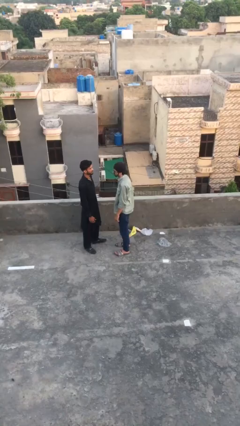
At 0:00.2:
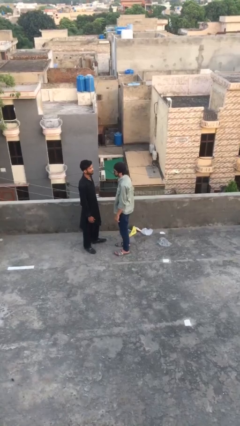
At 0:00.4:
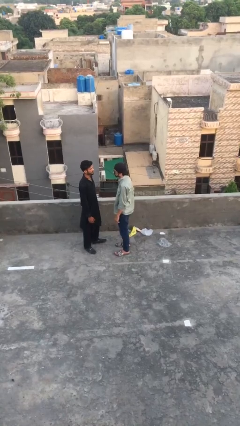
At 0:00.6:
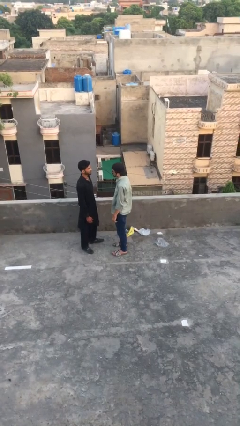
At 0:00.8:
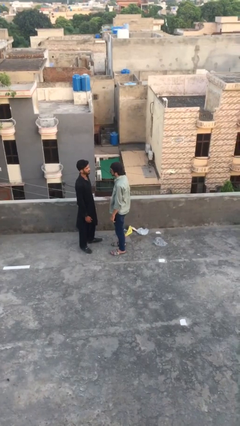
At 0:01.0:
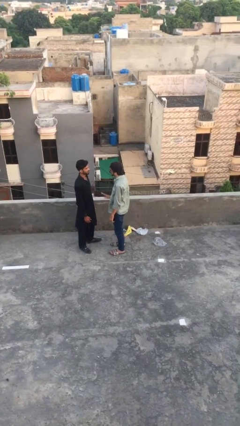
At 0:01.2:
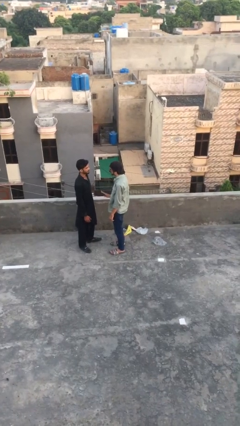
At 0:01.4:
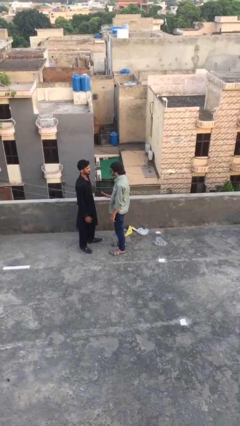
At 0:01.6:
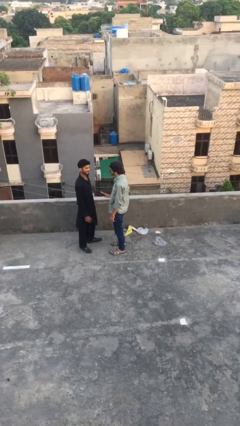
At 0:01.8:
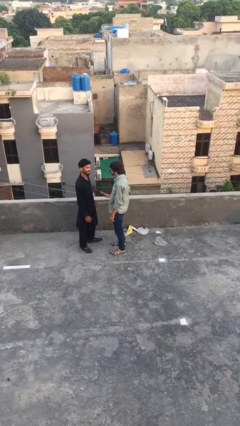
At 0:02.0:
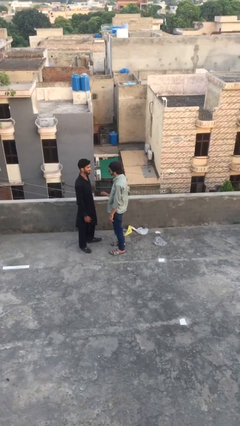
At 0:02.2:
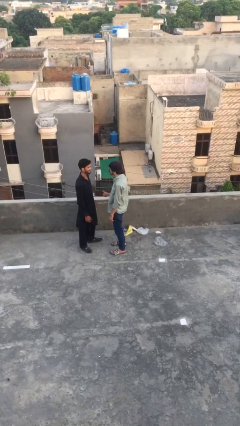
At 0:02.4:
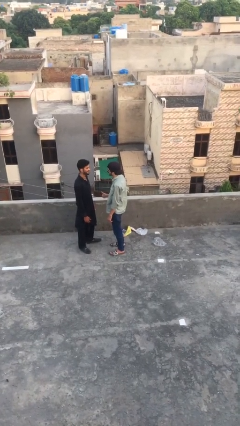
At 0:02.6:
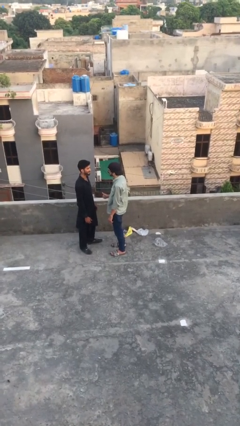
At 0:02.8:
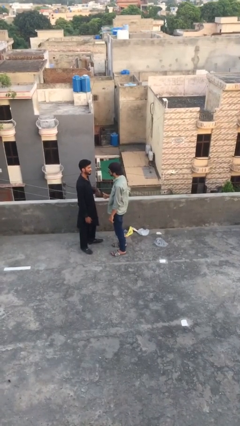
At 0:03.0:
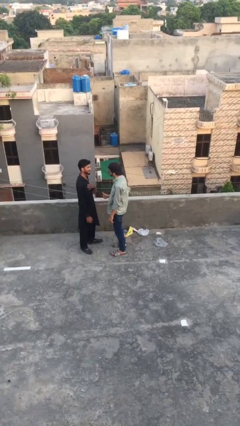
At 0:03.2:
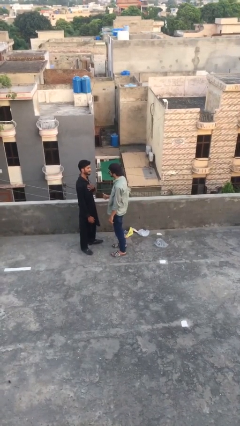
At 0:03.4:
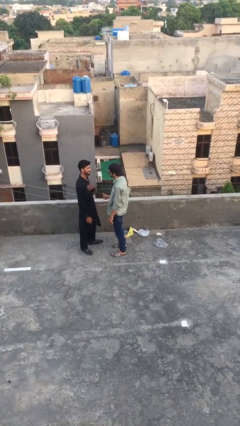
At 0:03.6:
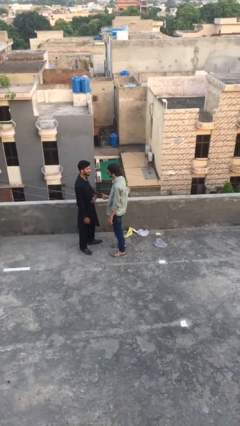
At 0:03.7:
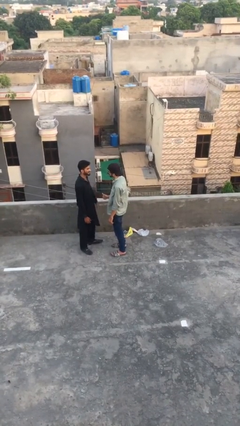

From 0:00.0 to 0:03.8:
person talks to person

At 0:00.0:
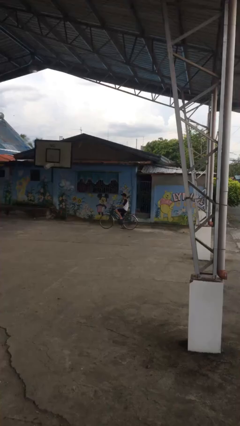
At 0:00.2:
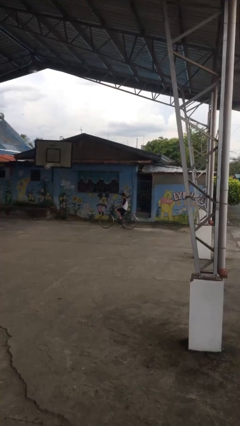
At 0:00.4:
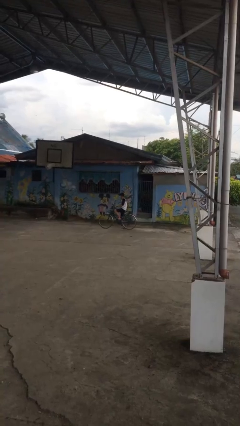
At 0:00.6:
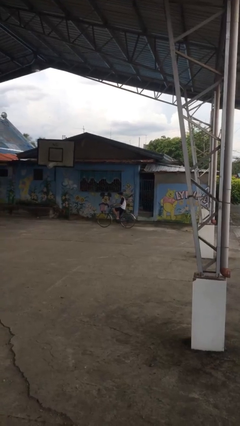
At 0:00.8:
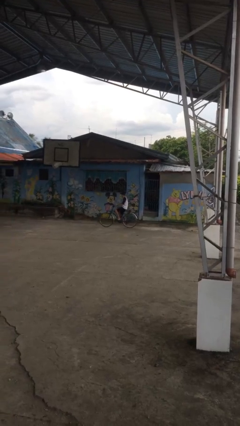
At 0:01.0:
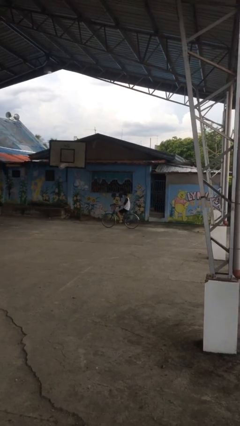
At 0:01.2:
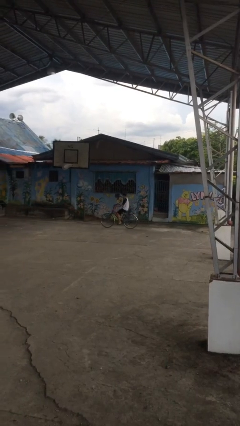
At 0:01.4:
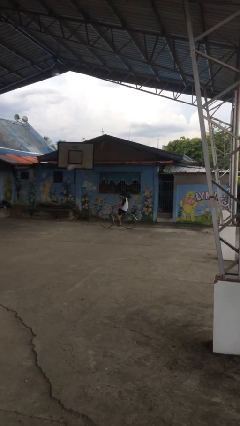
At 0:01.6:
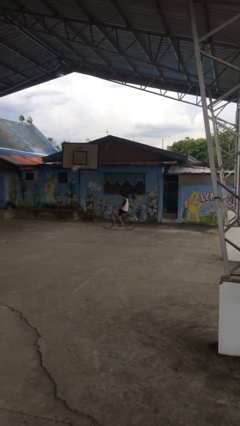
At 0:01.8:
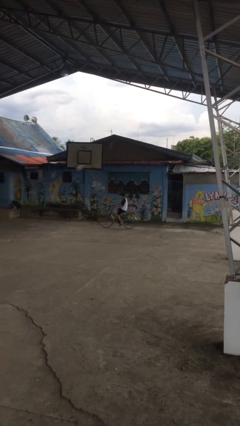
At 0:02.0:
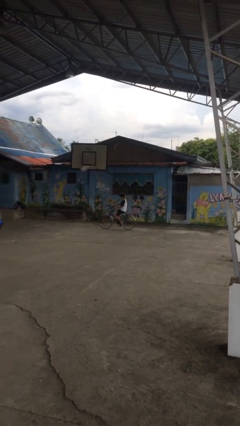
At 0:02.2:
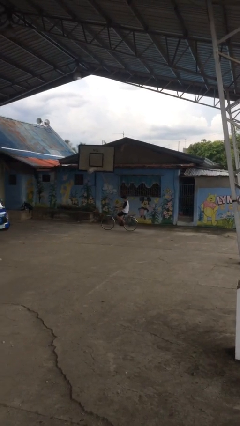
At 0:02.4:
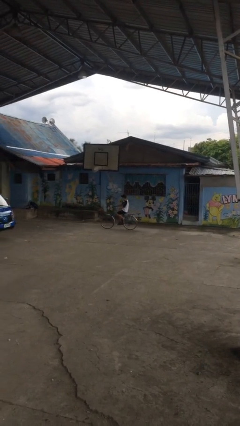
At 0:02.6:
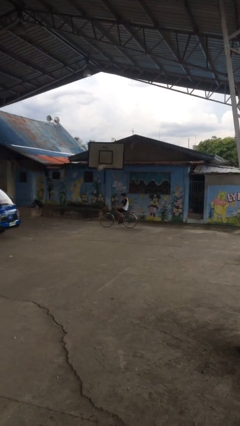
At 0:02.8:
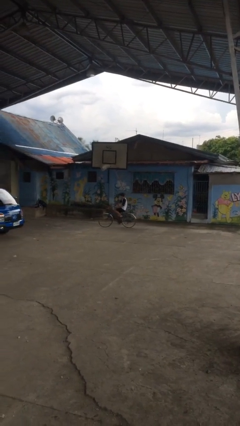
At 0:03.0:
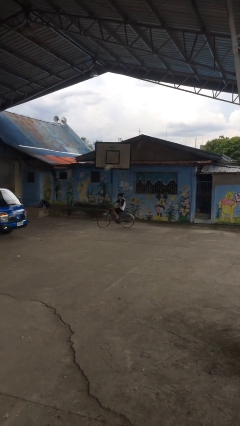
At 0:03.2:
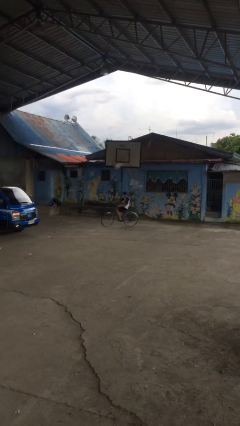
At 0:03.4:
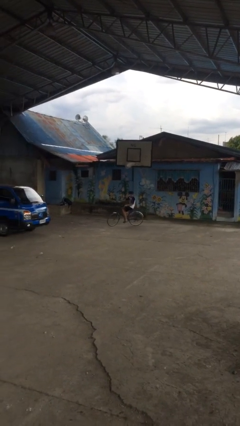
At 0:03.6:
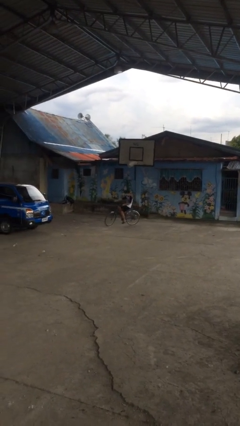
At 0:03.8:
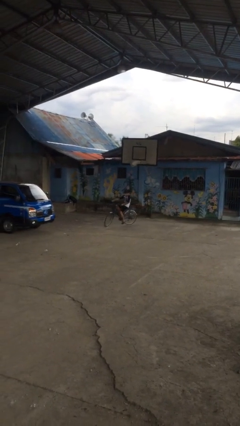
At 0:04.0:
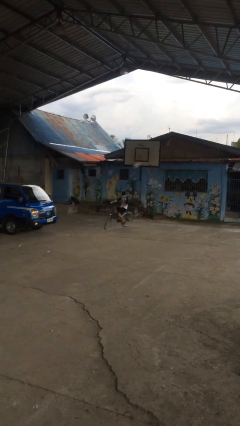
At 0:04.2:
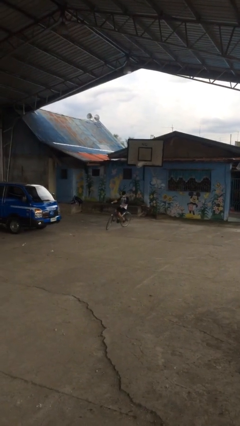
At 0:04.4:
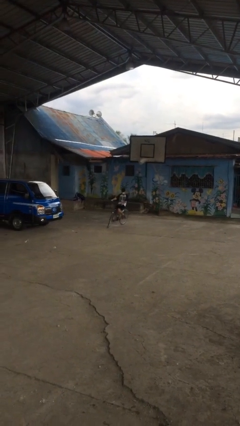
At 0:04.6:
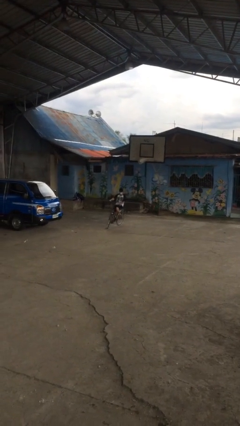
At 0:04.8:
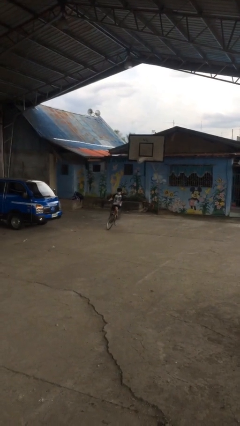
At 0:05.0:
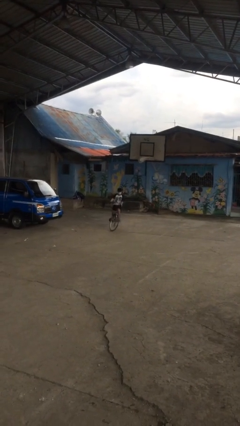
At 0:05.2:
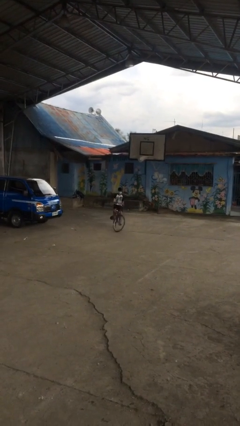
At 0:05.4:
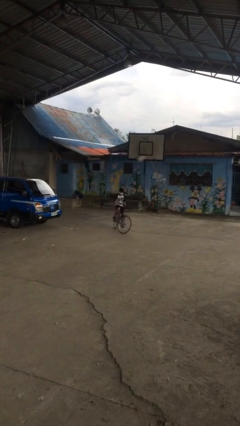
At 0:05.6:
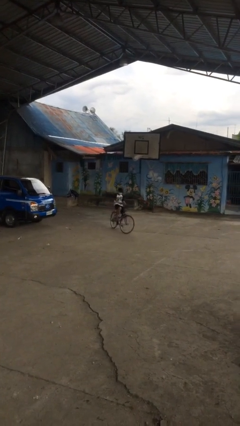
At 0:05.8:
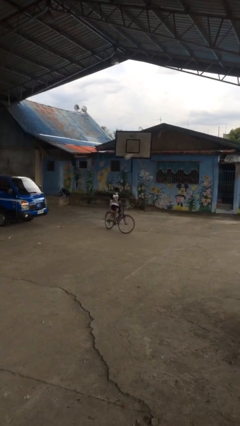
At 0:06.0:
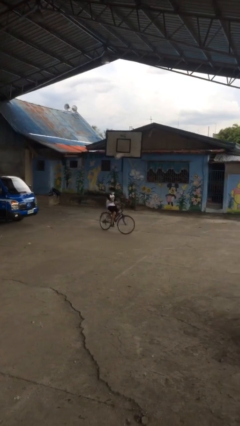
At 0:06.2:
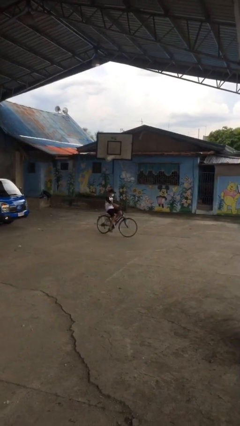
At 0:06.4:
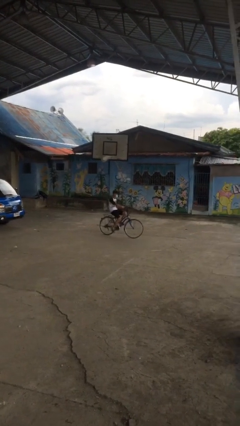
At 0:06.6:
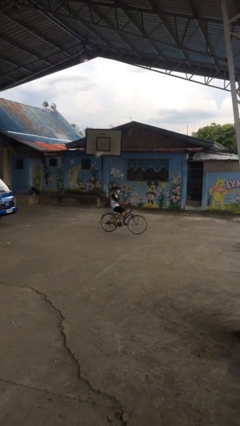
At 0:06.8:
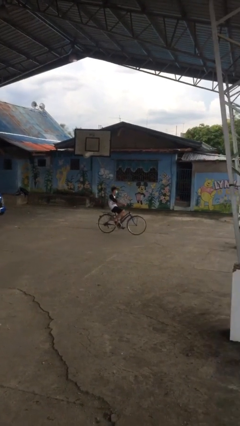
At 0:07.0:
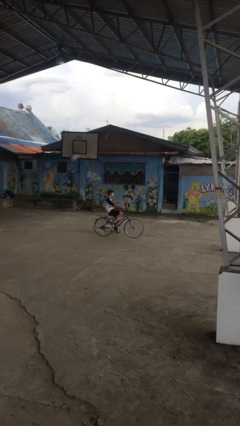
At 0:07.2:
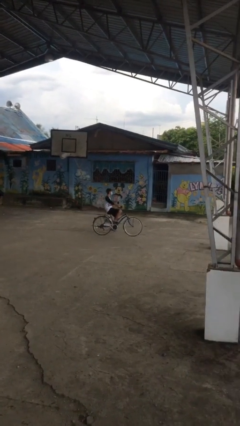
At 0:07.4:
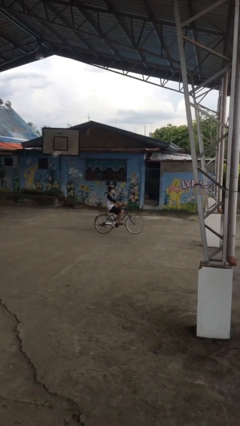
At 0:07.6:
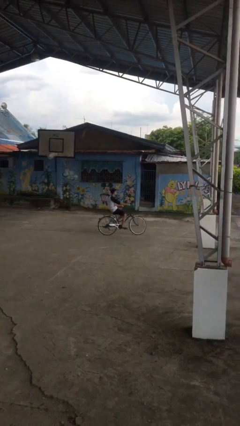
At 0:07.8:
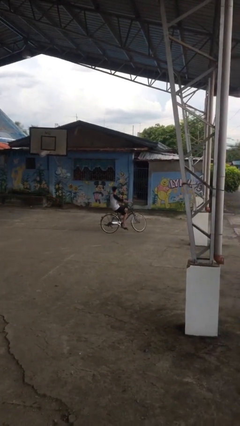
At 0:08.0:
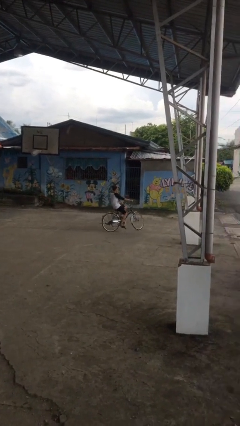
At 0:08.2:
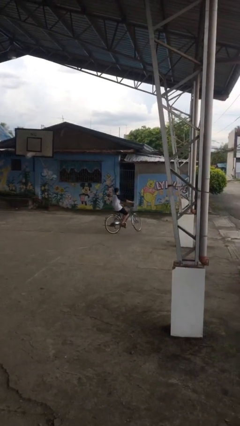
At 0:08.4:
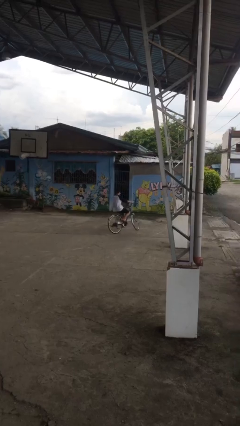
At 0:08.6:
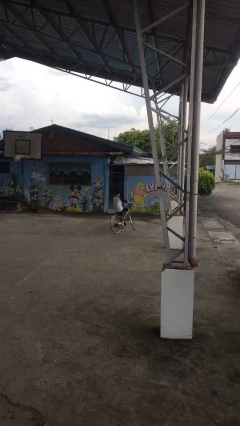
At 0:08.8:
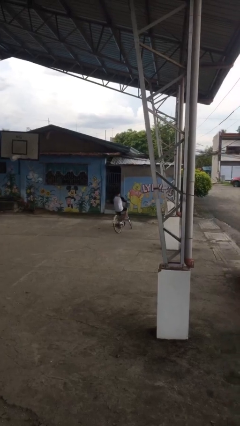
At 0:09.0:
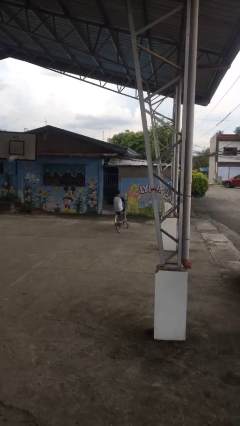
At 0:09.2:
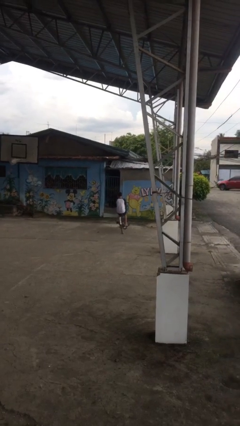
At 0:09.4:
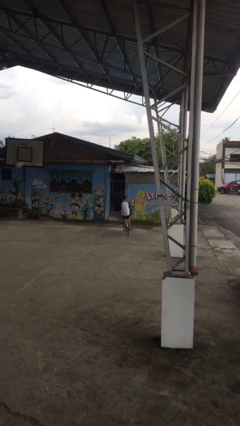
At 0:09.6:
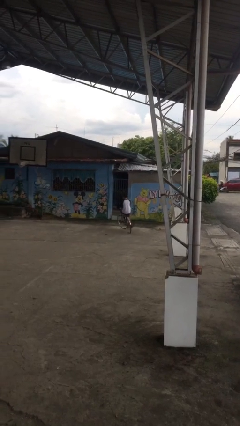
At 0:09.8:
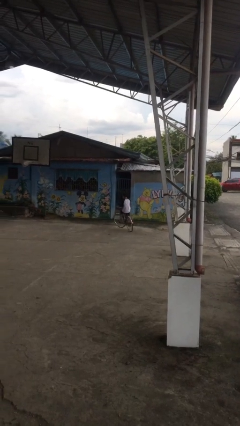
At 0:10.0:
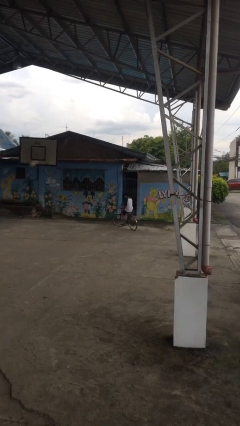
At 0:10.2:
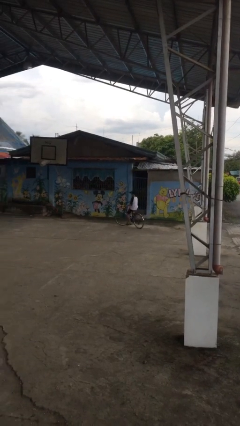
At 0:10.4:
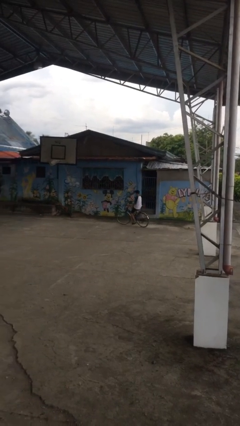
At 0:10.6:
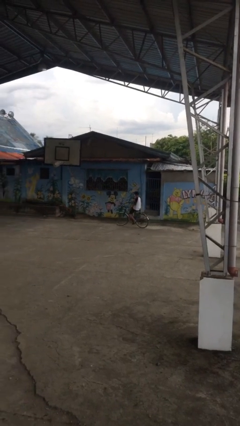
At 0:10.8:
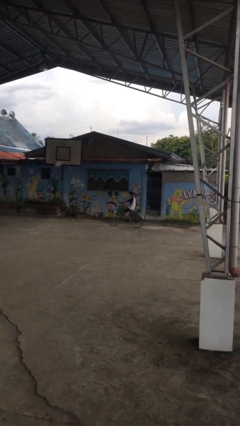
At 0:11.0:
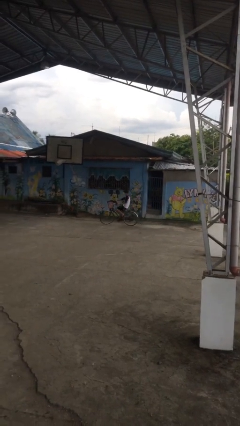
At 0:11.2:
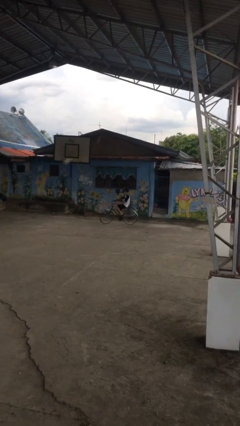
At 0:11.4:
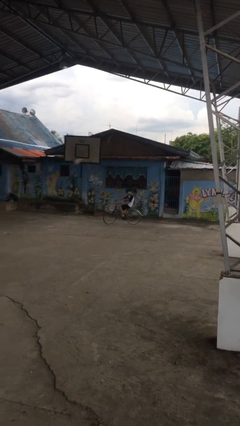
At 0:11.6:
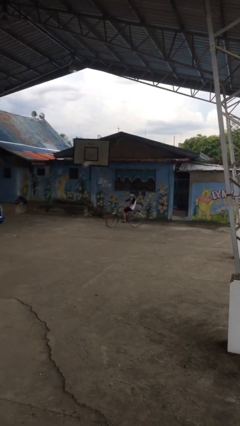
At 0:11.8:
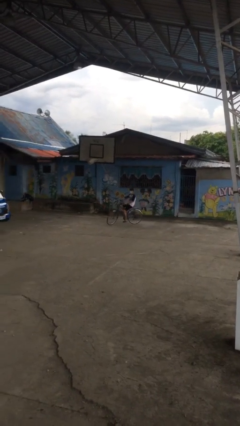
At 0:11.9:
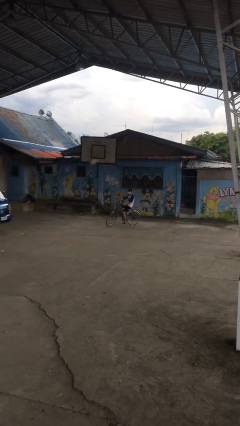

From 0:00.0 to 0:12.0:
person rides bicycle

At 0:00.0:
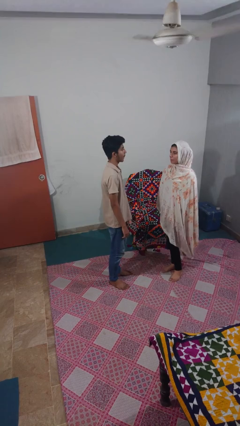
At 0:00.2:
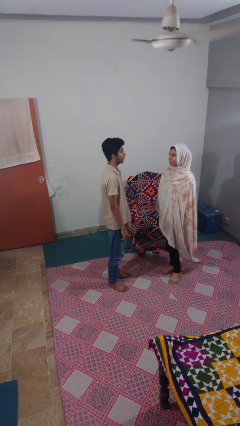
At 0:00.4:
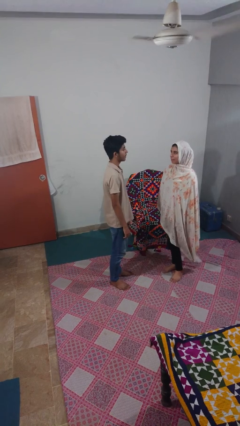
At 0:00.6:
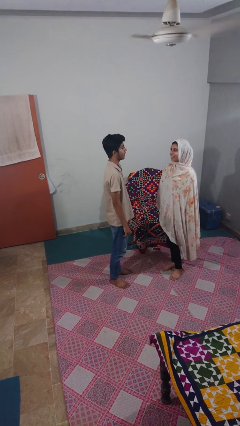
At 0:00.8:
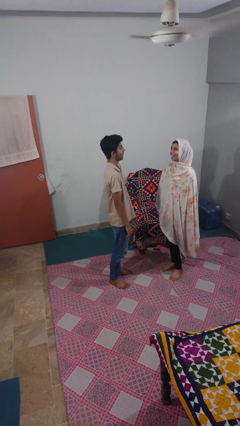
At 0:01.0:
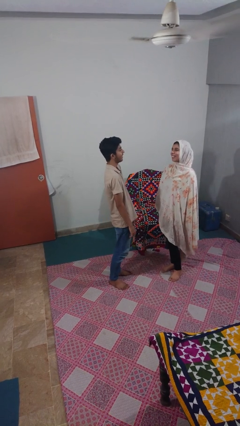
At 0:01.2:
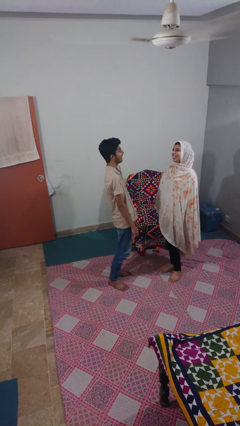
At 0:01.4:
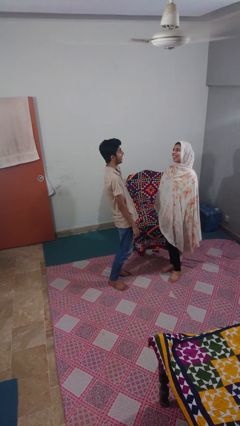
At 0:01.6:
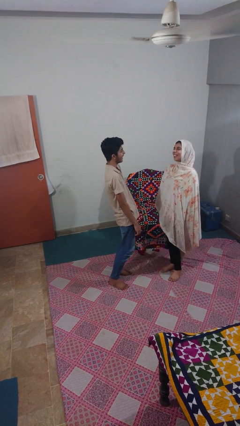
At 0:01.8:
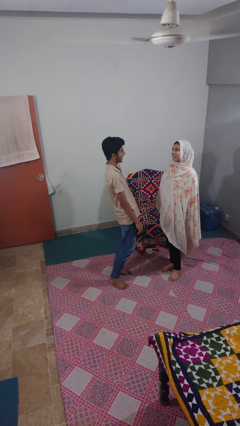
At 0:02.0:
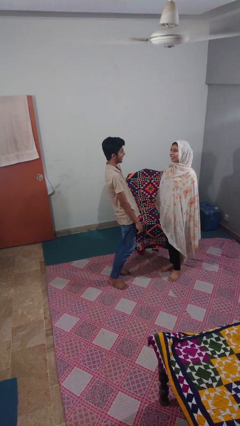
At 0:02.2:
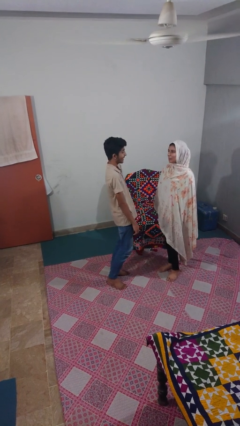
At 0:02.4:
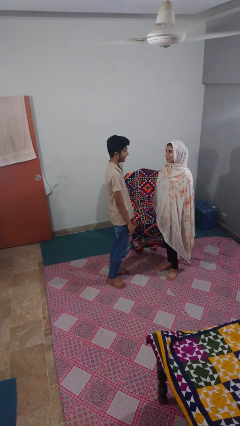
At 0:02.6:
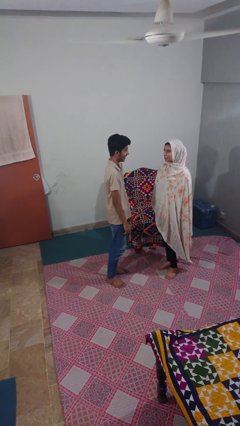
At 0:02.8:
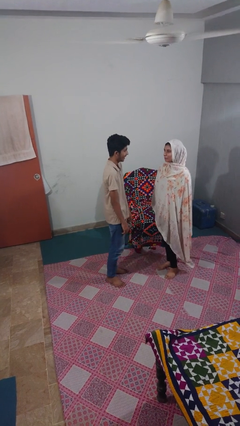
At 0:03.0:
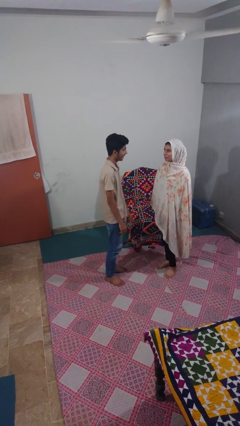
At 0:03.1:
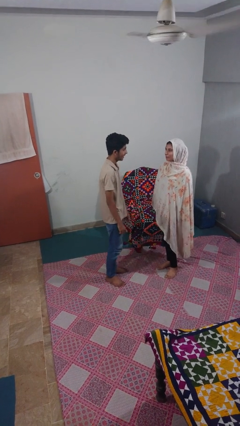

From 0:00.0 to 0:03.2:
person laughs with person
